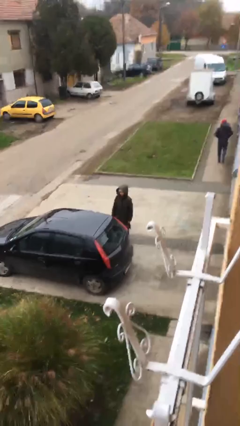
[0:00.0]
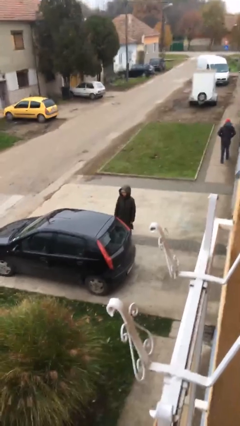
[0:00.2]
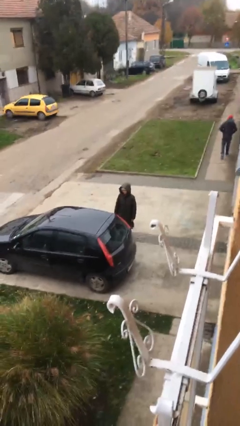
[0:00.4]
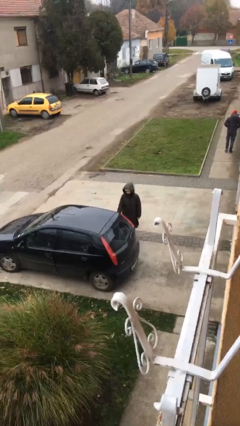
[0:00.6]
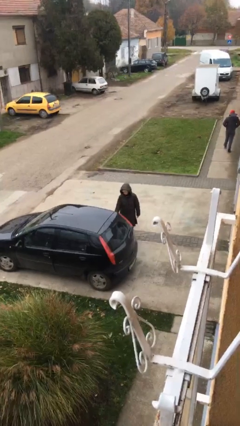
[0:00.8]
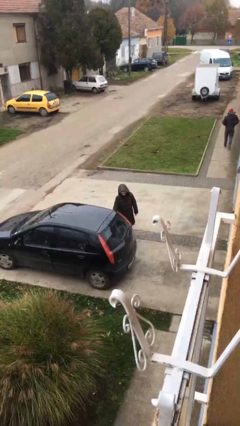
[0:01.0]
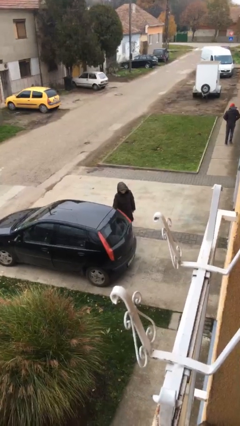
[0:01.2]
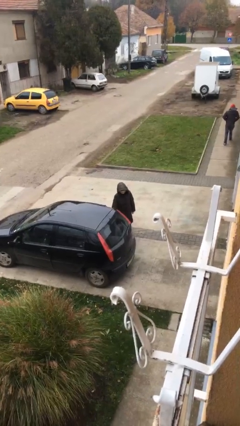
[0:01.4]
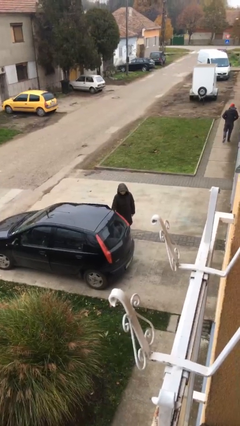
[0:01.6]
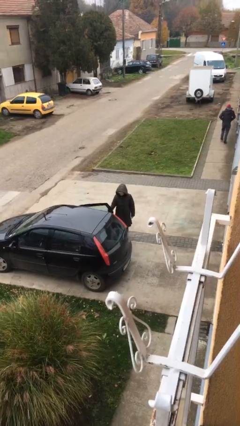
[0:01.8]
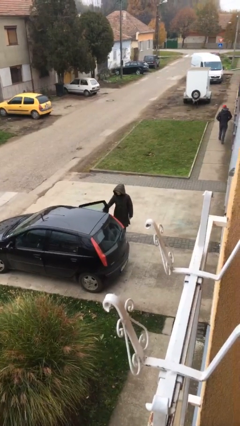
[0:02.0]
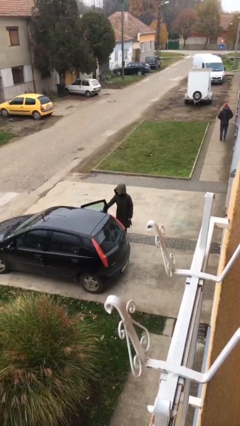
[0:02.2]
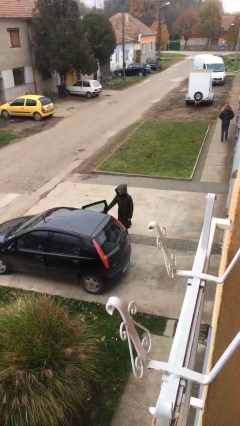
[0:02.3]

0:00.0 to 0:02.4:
person opens car door

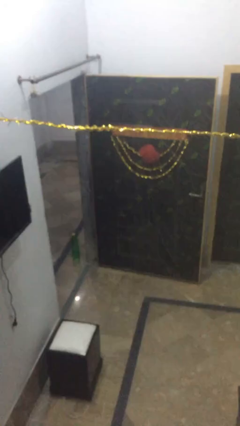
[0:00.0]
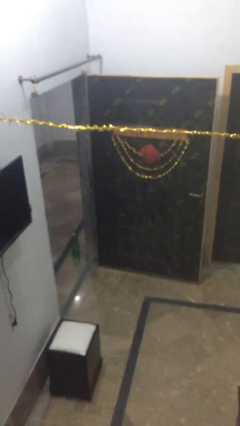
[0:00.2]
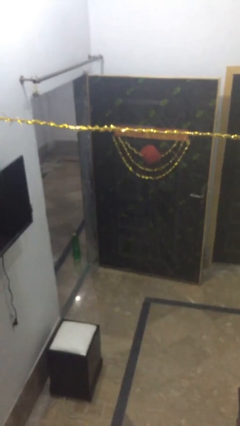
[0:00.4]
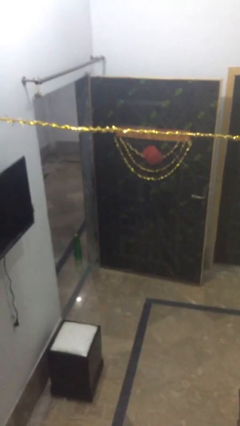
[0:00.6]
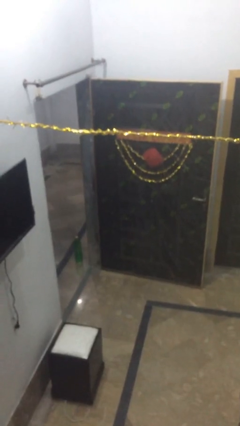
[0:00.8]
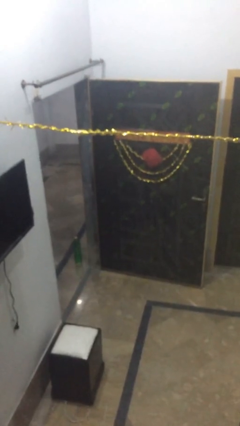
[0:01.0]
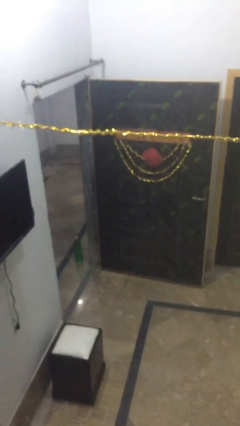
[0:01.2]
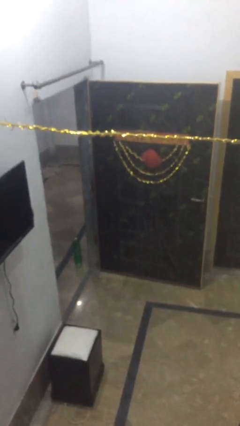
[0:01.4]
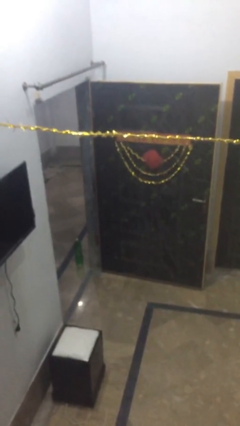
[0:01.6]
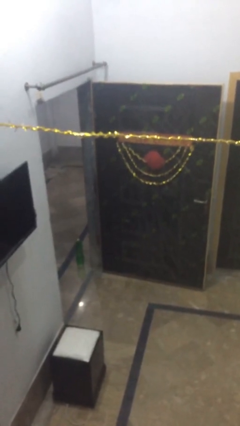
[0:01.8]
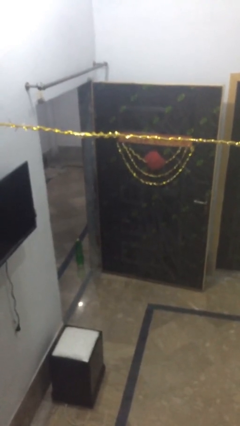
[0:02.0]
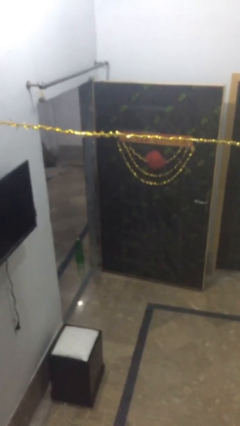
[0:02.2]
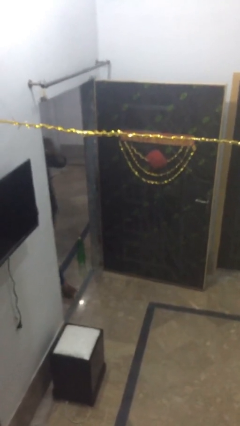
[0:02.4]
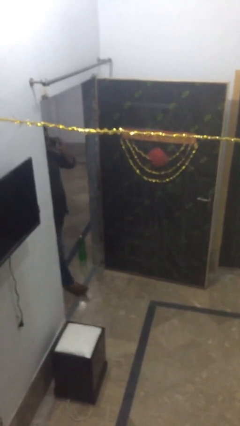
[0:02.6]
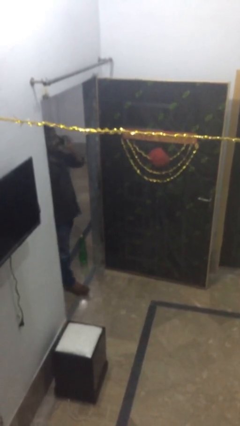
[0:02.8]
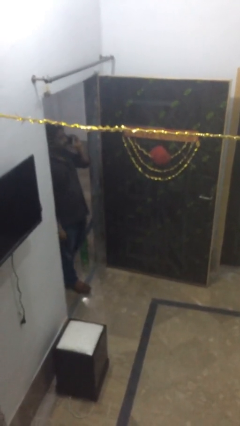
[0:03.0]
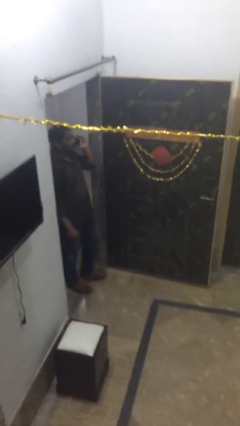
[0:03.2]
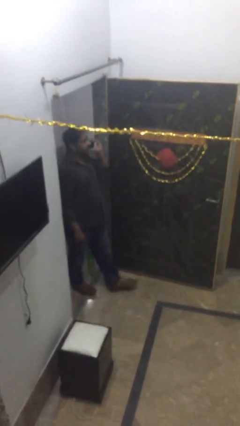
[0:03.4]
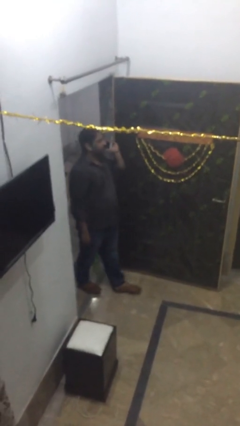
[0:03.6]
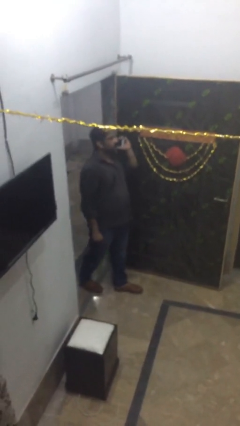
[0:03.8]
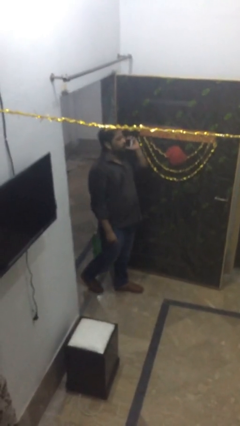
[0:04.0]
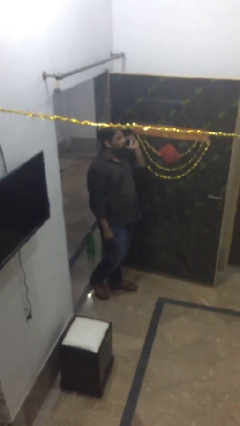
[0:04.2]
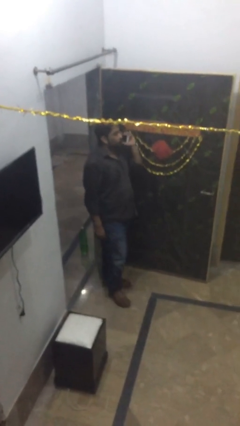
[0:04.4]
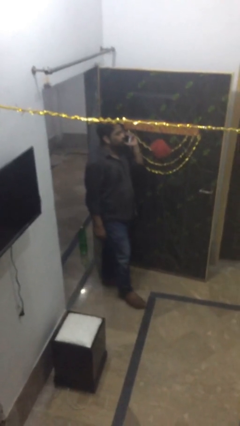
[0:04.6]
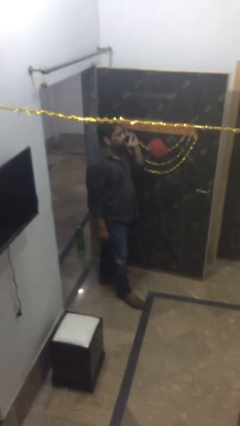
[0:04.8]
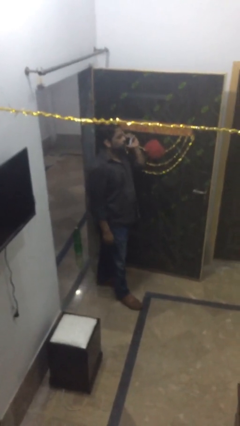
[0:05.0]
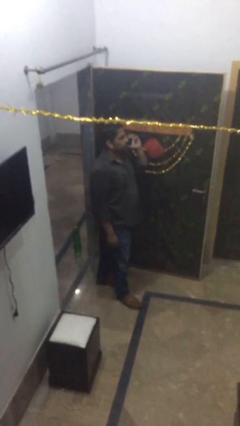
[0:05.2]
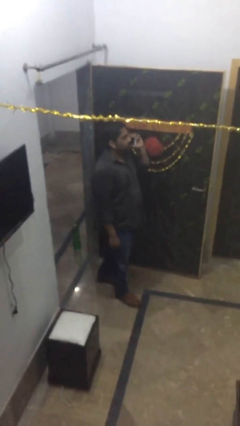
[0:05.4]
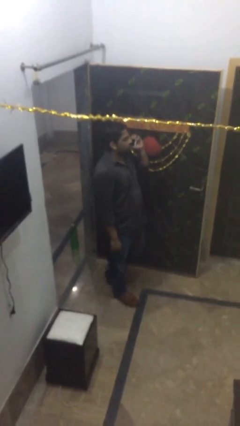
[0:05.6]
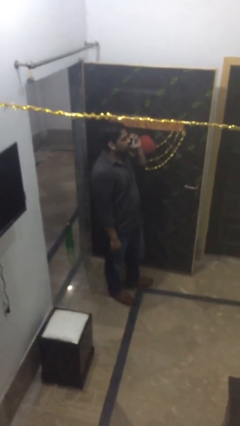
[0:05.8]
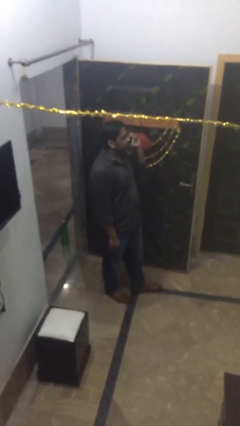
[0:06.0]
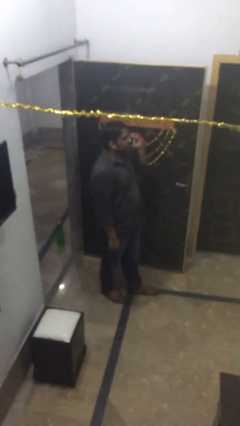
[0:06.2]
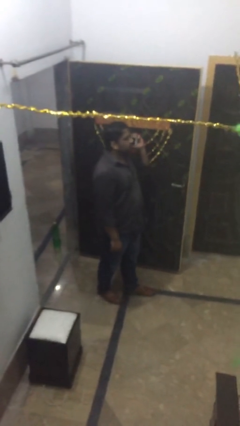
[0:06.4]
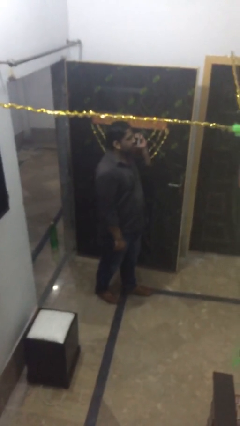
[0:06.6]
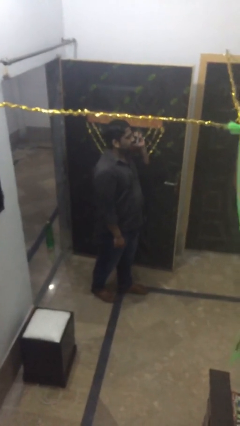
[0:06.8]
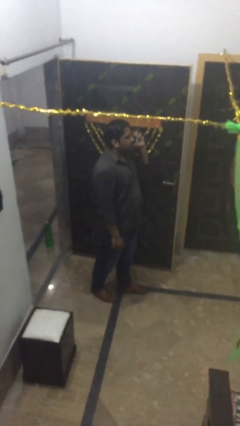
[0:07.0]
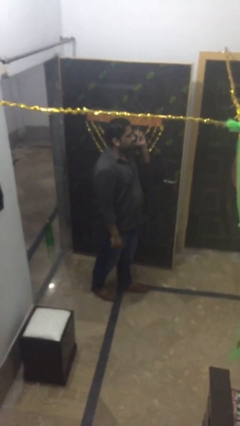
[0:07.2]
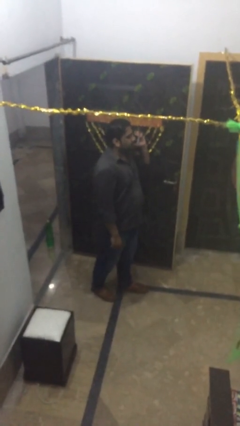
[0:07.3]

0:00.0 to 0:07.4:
person enters scene through structure

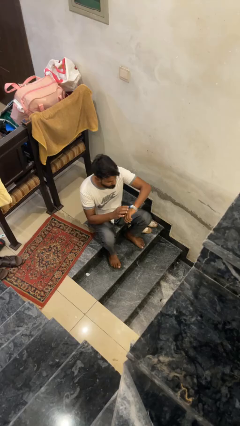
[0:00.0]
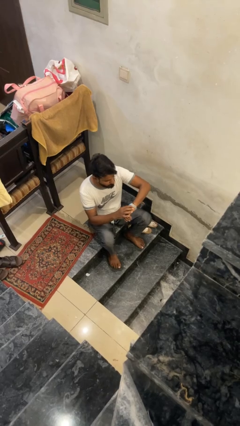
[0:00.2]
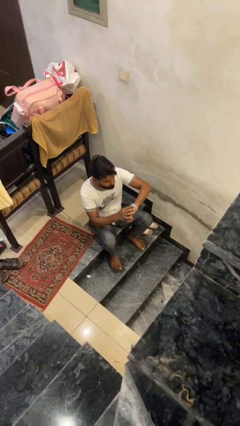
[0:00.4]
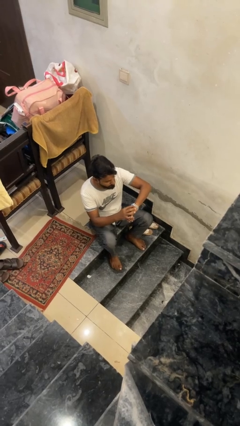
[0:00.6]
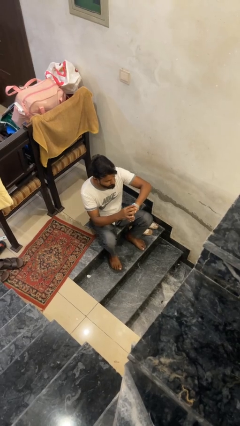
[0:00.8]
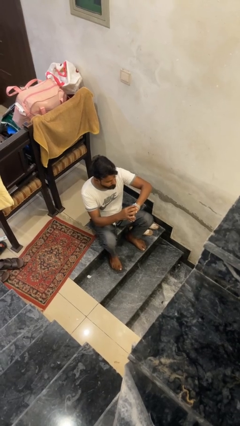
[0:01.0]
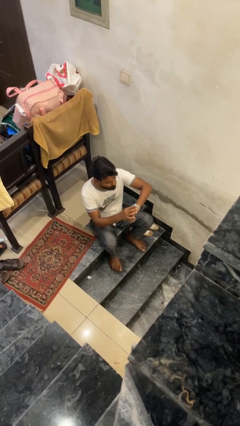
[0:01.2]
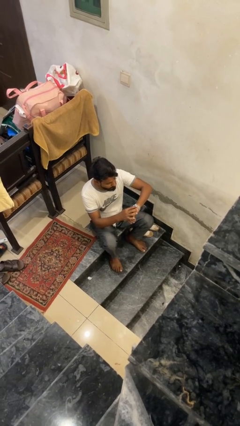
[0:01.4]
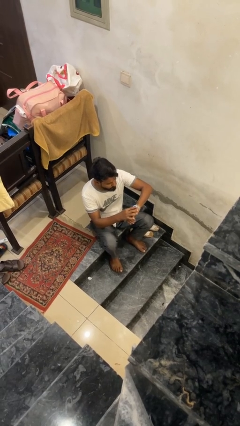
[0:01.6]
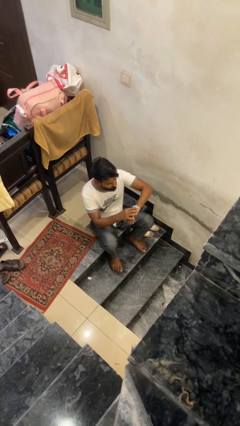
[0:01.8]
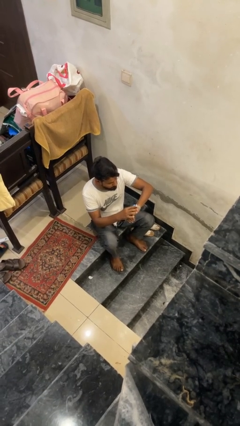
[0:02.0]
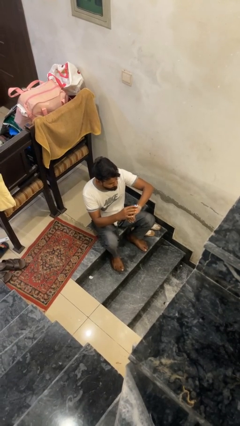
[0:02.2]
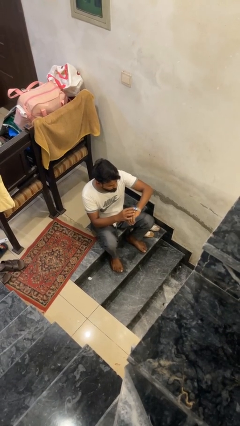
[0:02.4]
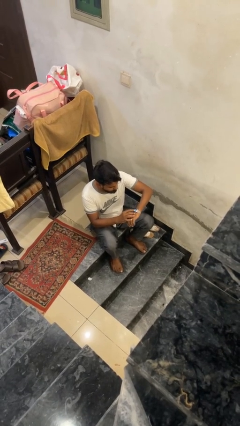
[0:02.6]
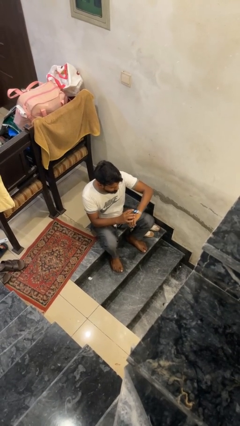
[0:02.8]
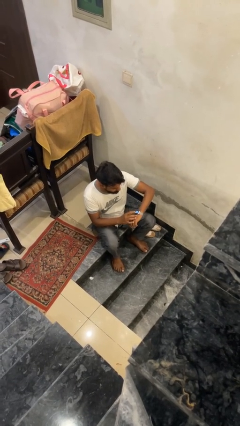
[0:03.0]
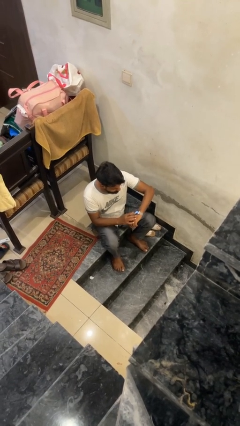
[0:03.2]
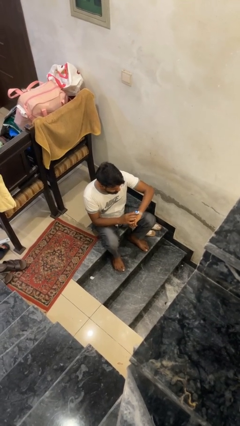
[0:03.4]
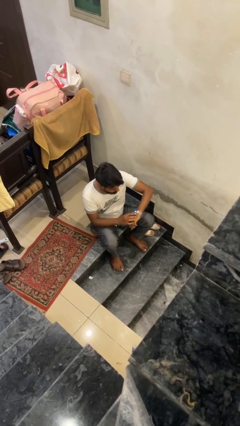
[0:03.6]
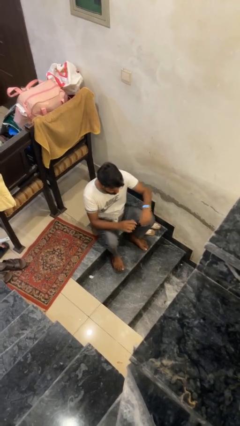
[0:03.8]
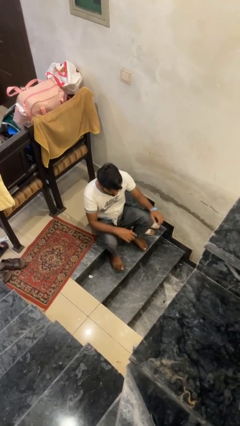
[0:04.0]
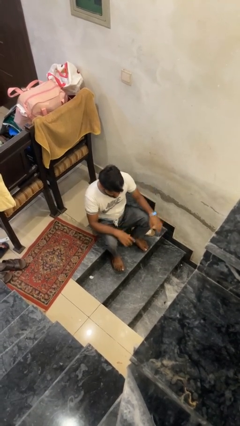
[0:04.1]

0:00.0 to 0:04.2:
person looks at wristwatch

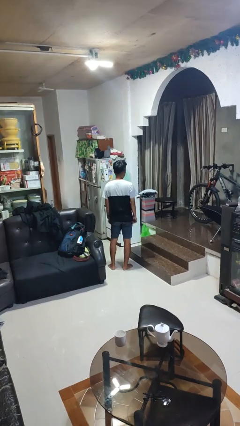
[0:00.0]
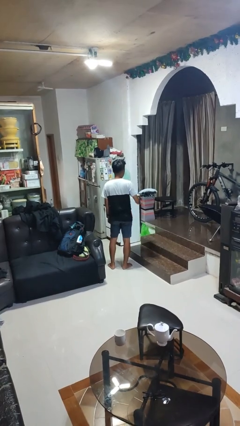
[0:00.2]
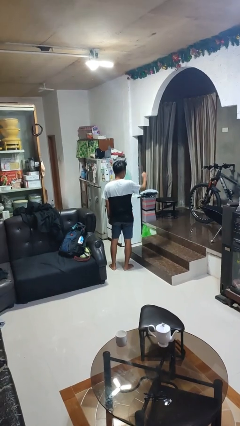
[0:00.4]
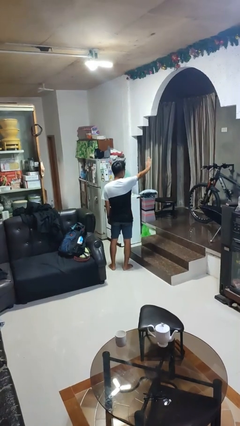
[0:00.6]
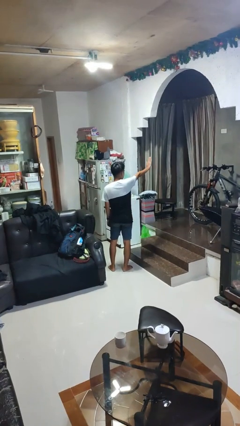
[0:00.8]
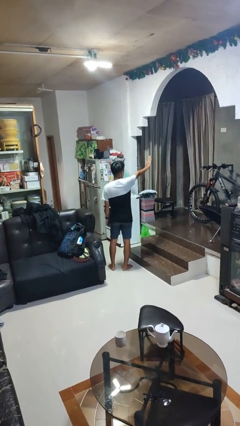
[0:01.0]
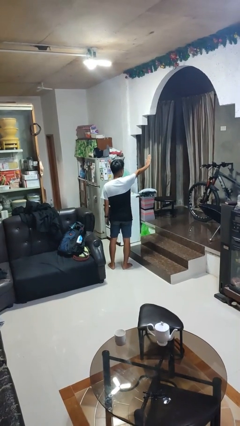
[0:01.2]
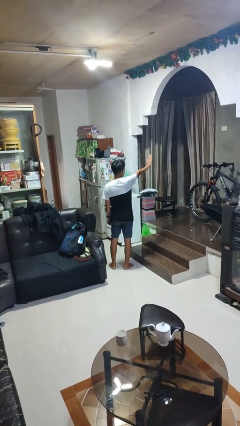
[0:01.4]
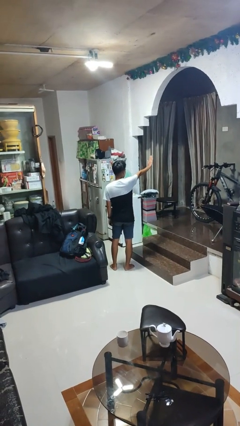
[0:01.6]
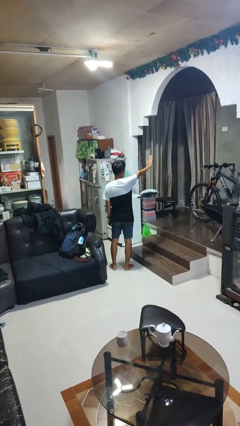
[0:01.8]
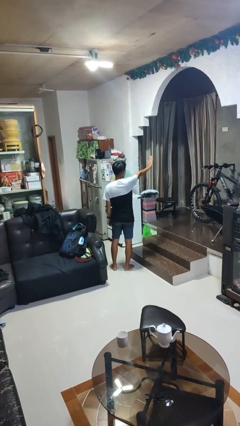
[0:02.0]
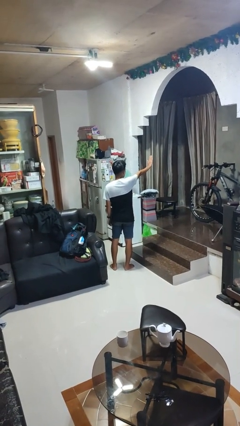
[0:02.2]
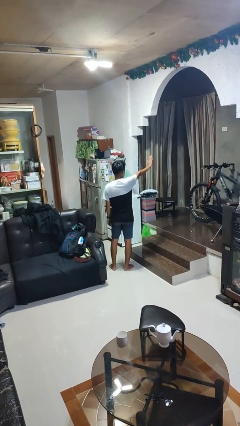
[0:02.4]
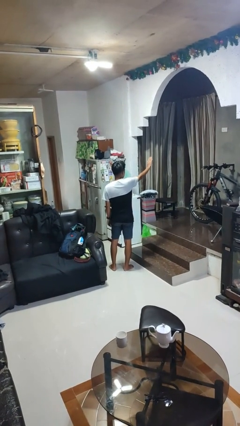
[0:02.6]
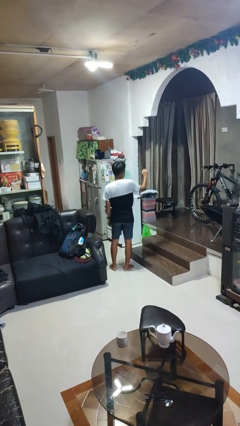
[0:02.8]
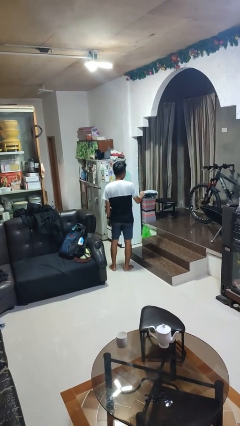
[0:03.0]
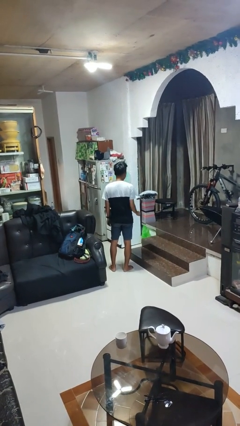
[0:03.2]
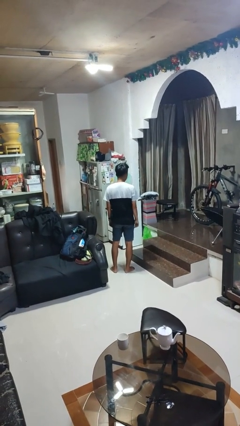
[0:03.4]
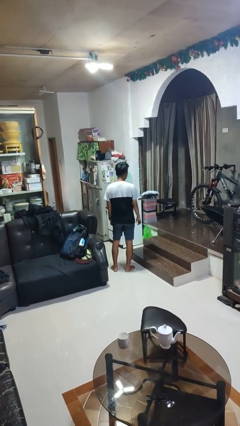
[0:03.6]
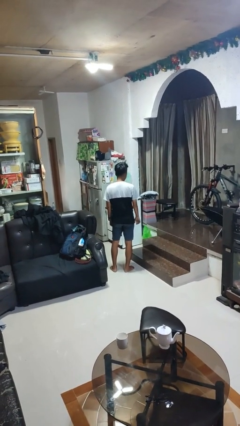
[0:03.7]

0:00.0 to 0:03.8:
person gestures stop
